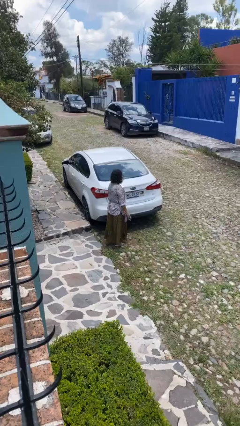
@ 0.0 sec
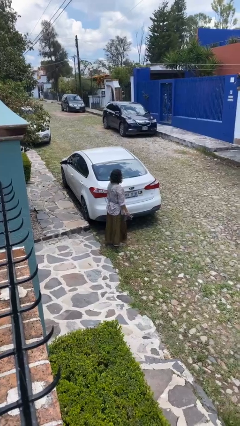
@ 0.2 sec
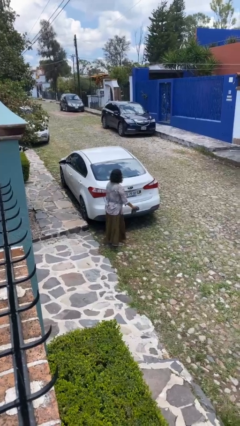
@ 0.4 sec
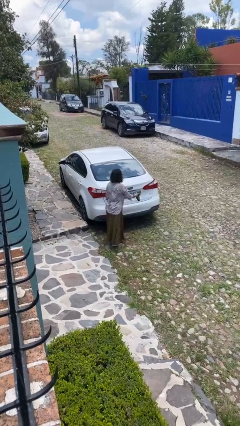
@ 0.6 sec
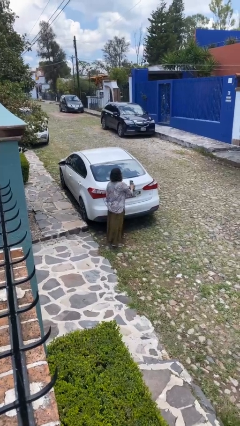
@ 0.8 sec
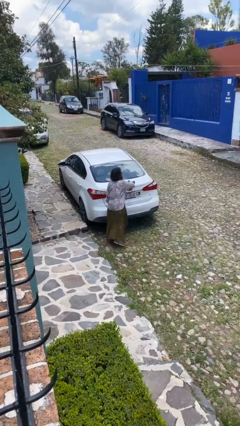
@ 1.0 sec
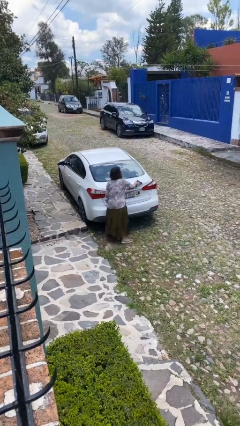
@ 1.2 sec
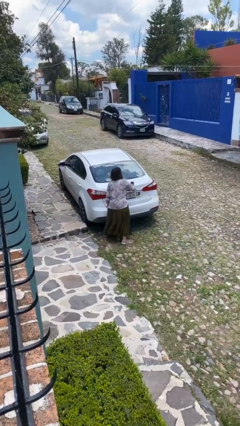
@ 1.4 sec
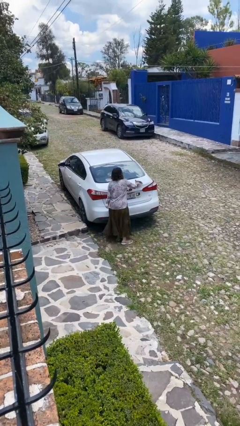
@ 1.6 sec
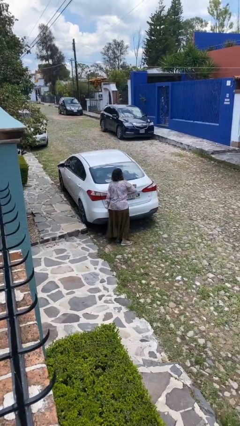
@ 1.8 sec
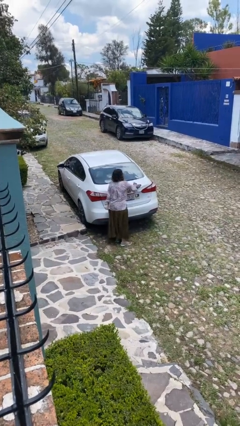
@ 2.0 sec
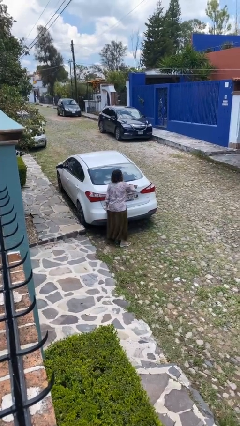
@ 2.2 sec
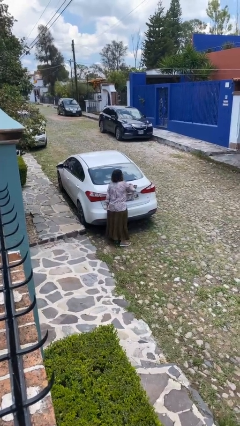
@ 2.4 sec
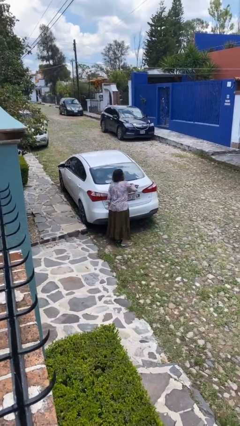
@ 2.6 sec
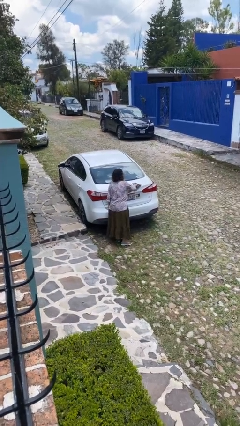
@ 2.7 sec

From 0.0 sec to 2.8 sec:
person polishes car with rag

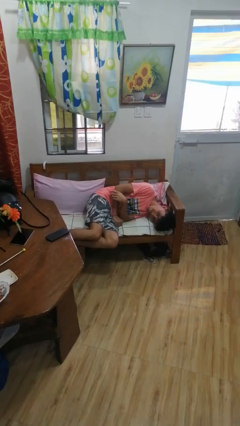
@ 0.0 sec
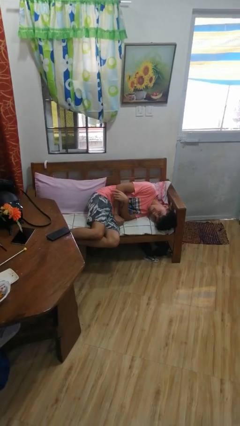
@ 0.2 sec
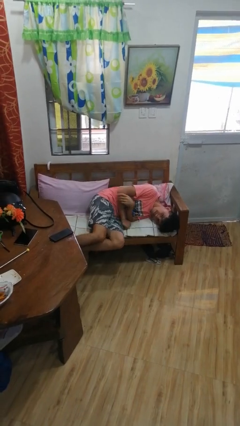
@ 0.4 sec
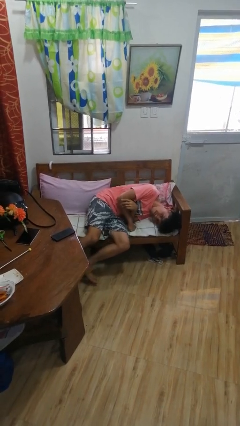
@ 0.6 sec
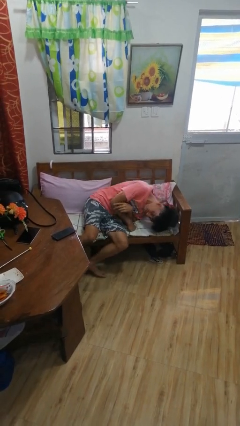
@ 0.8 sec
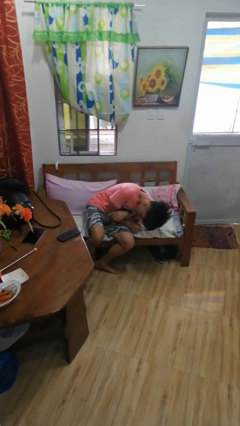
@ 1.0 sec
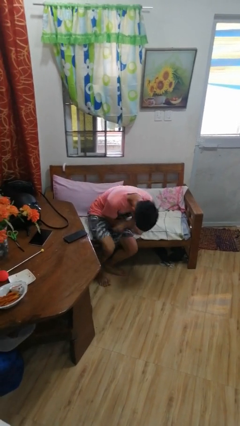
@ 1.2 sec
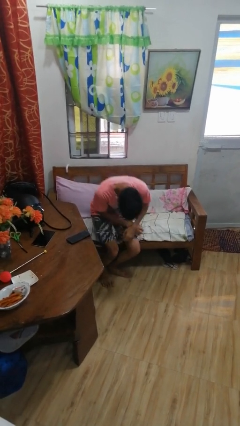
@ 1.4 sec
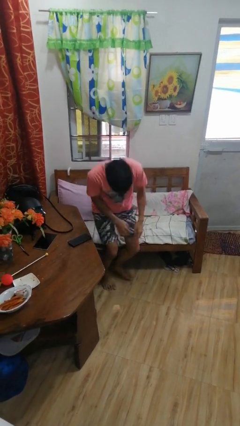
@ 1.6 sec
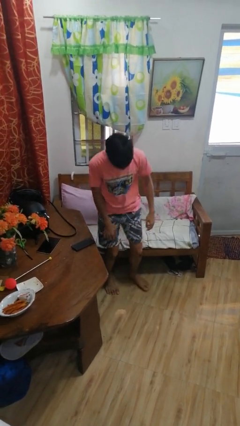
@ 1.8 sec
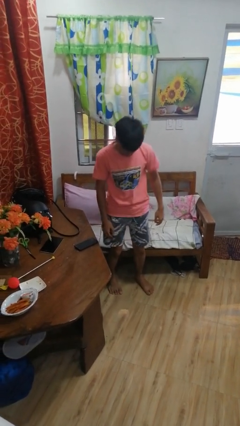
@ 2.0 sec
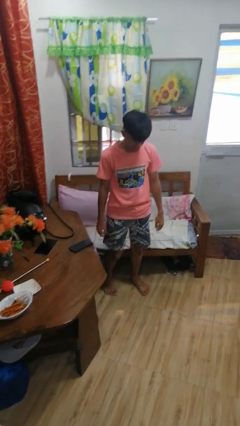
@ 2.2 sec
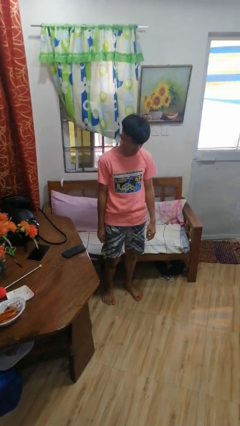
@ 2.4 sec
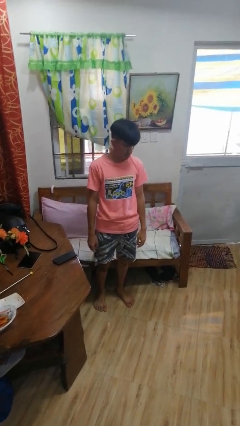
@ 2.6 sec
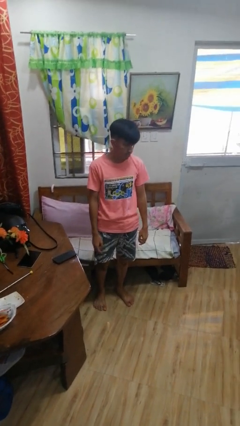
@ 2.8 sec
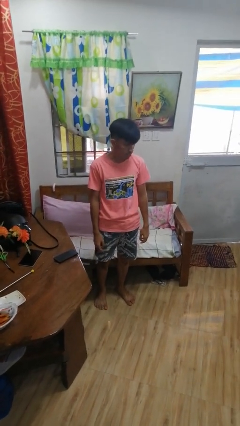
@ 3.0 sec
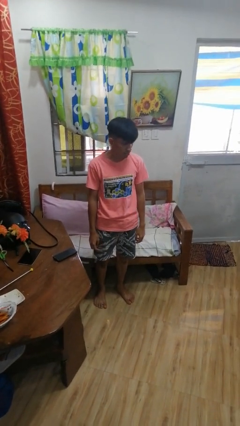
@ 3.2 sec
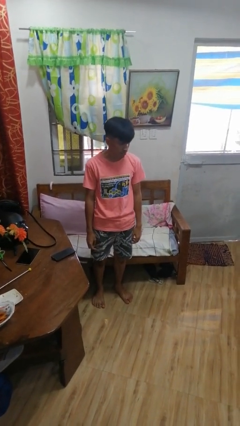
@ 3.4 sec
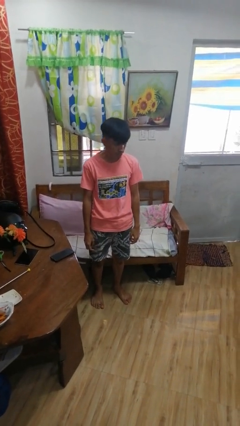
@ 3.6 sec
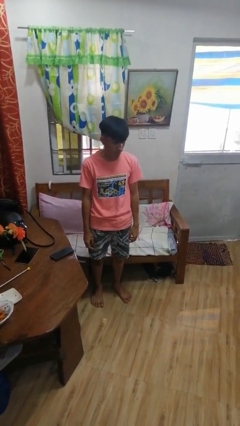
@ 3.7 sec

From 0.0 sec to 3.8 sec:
person stands up

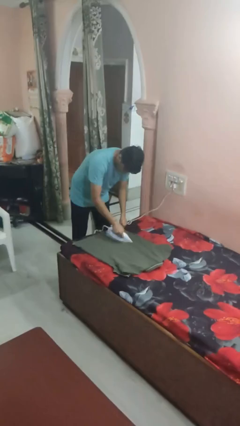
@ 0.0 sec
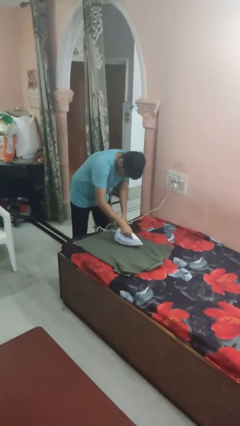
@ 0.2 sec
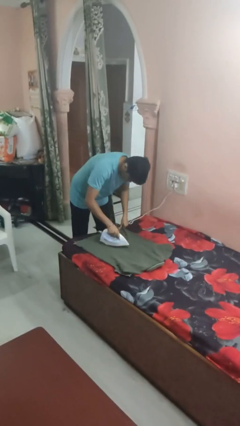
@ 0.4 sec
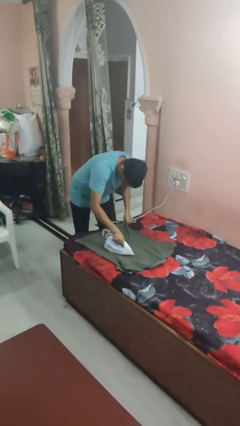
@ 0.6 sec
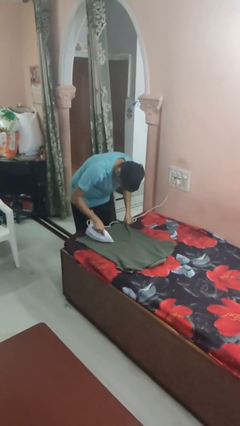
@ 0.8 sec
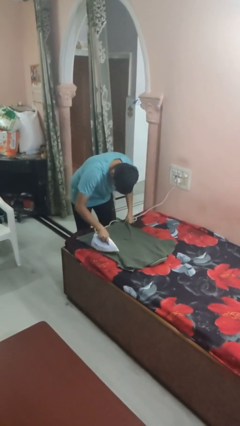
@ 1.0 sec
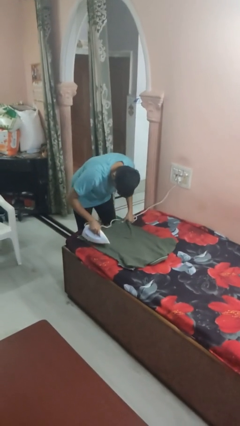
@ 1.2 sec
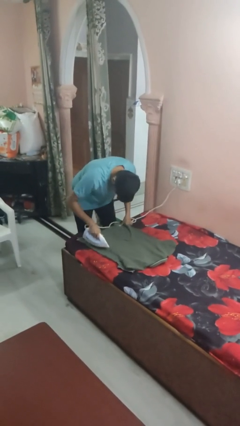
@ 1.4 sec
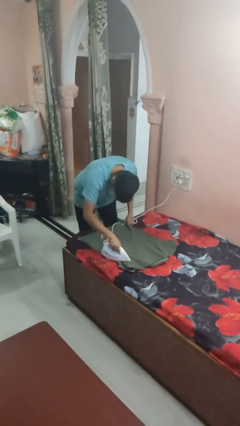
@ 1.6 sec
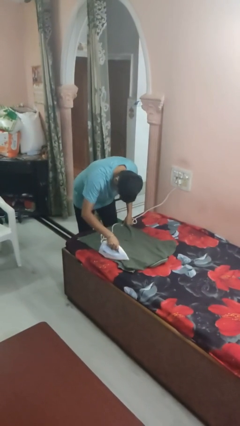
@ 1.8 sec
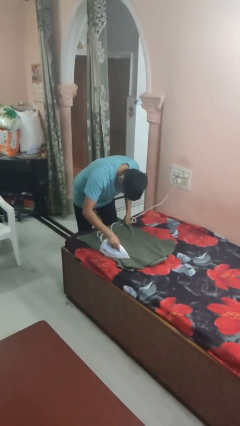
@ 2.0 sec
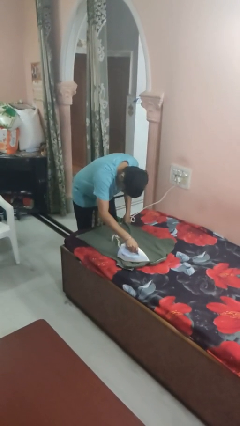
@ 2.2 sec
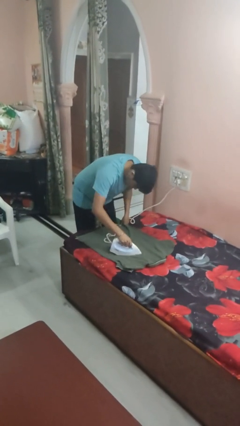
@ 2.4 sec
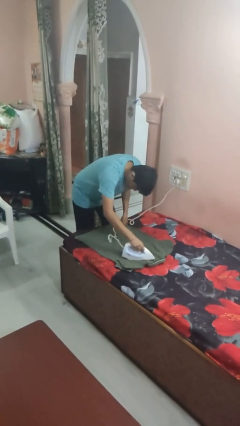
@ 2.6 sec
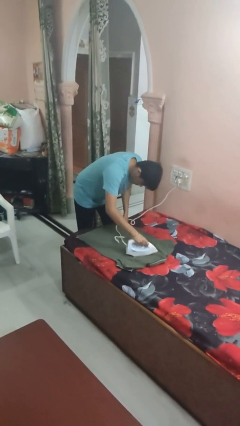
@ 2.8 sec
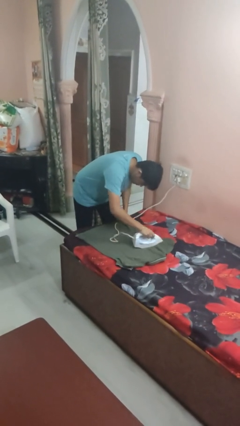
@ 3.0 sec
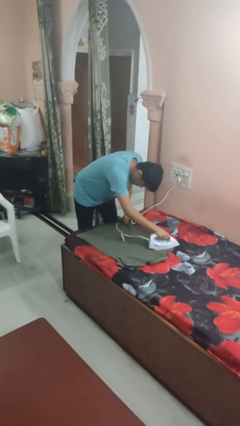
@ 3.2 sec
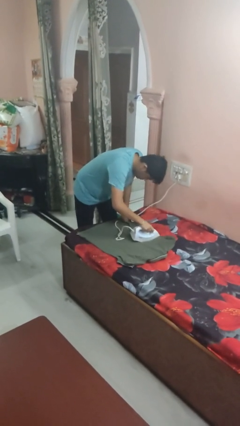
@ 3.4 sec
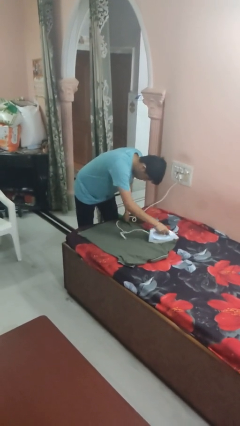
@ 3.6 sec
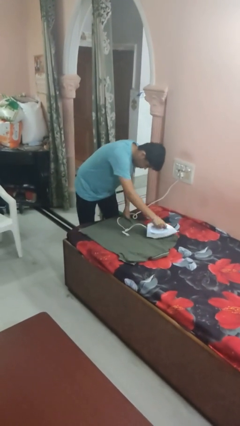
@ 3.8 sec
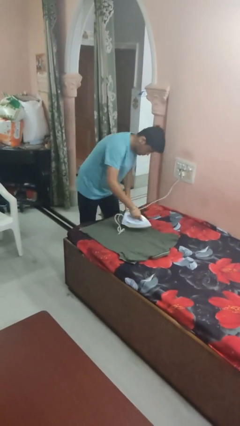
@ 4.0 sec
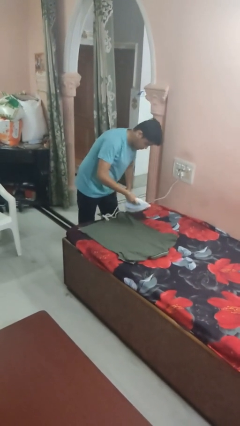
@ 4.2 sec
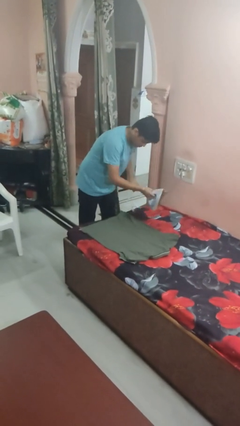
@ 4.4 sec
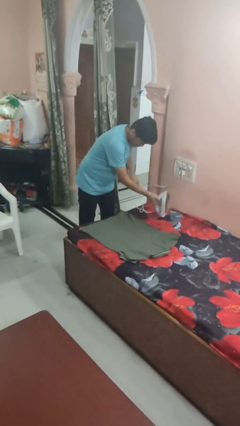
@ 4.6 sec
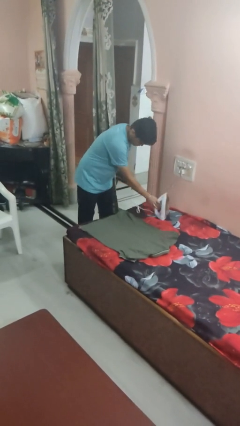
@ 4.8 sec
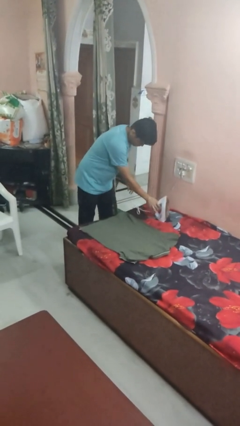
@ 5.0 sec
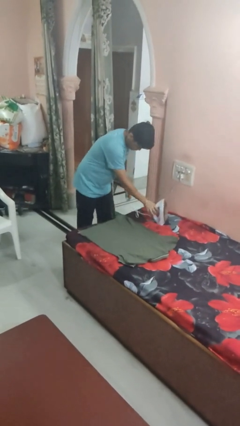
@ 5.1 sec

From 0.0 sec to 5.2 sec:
person irons clothes

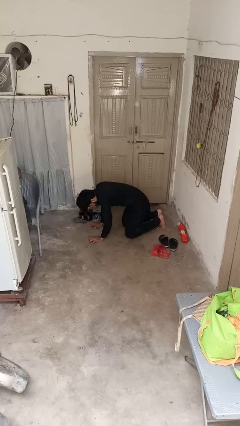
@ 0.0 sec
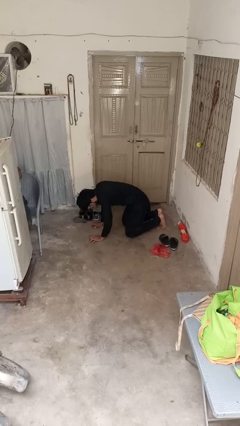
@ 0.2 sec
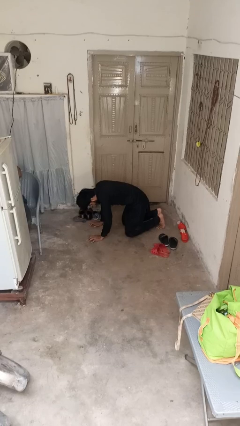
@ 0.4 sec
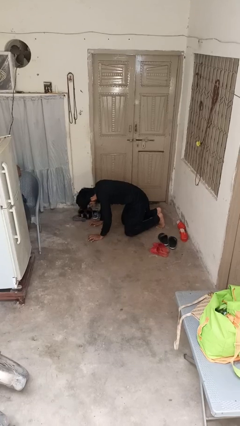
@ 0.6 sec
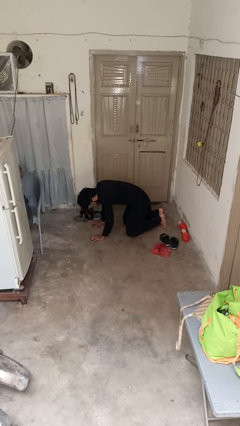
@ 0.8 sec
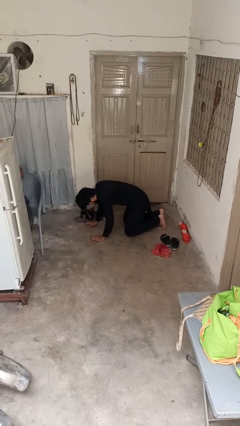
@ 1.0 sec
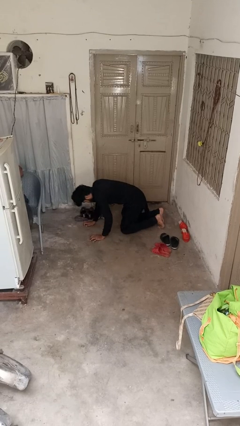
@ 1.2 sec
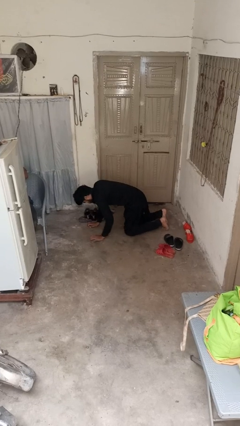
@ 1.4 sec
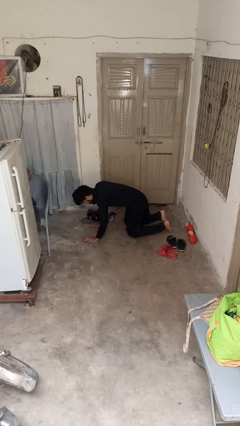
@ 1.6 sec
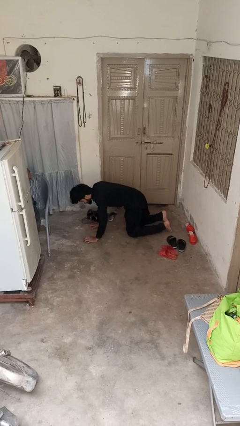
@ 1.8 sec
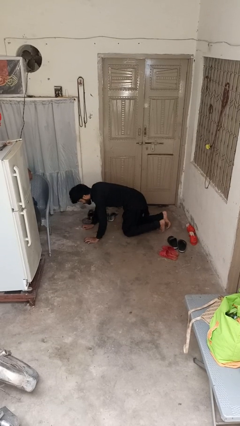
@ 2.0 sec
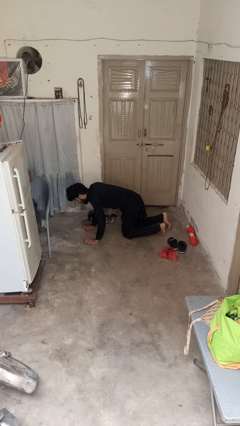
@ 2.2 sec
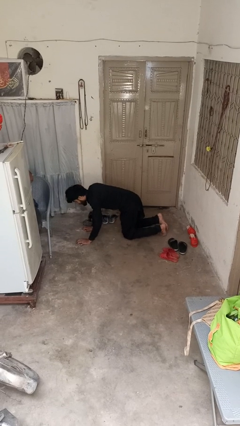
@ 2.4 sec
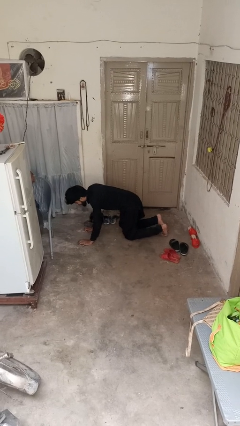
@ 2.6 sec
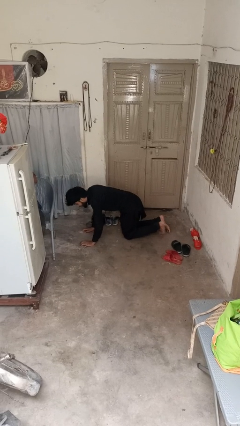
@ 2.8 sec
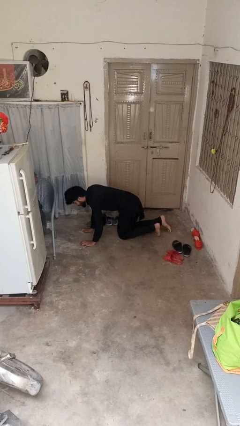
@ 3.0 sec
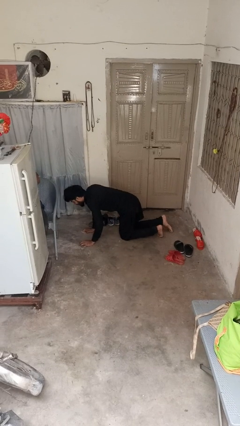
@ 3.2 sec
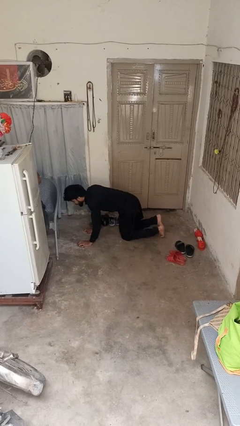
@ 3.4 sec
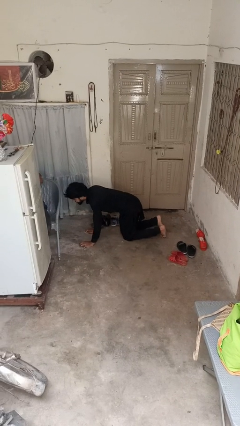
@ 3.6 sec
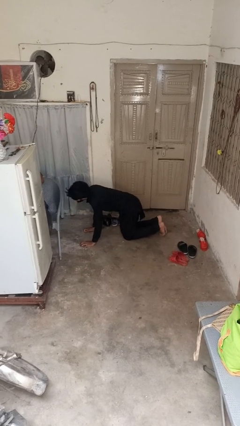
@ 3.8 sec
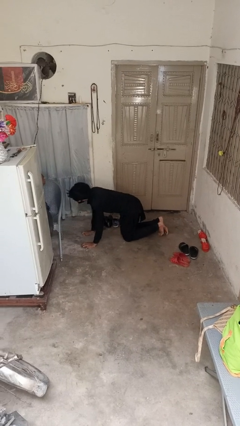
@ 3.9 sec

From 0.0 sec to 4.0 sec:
person crawls

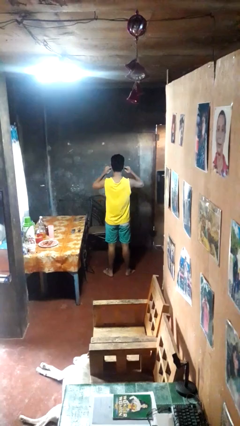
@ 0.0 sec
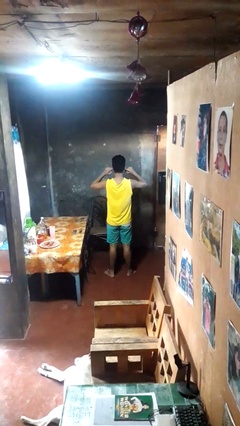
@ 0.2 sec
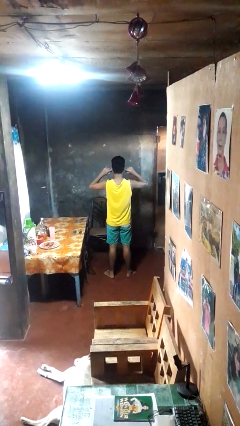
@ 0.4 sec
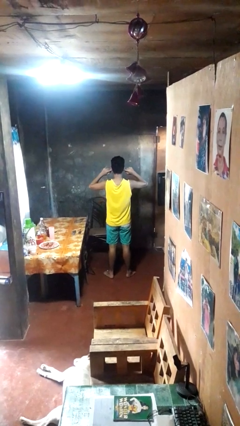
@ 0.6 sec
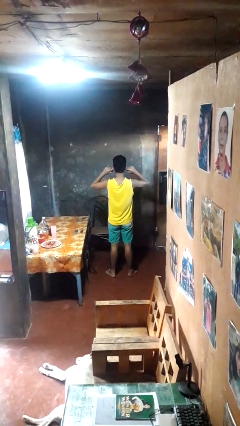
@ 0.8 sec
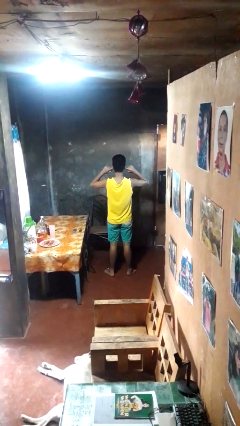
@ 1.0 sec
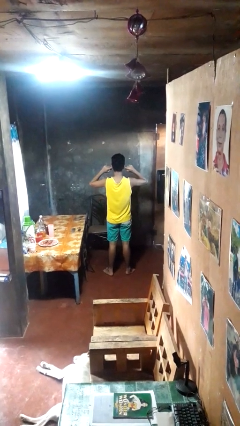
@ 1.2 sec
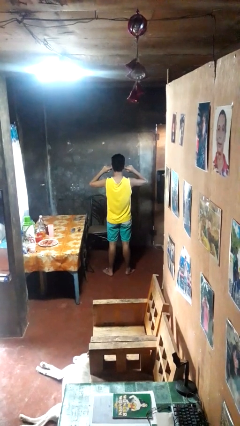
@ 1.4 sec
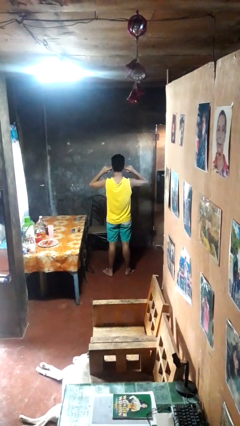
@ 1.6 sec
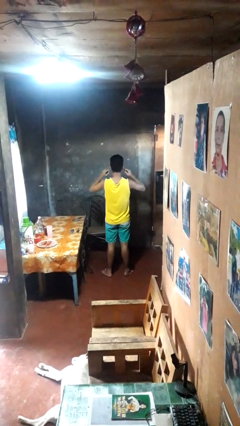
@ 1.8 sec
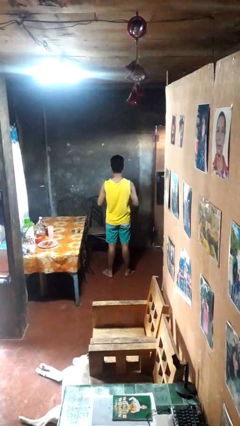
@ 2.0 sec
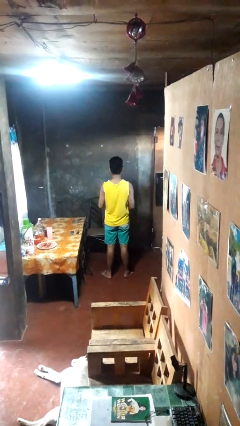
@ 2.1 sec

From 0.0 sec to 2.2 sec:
person puts fingers in ear
